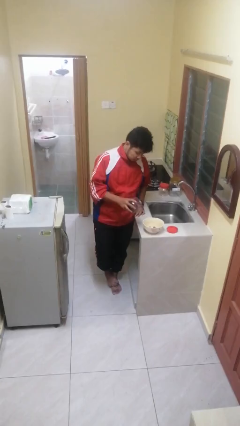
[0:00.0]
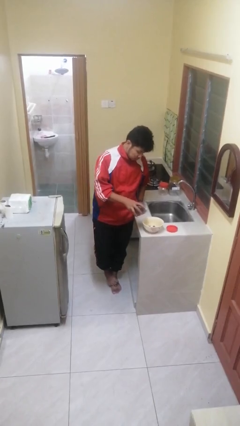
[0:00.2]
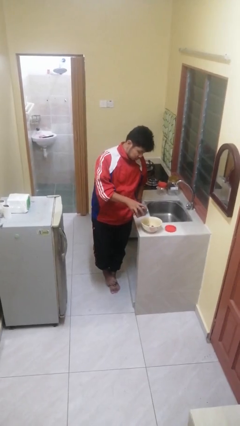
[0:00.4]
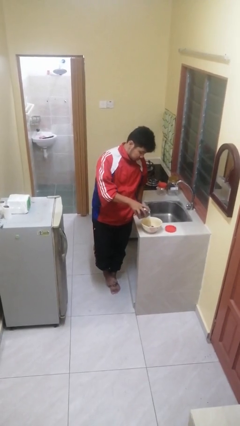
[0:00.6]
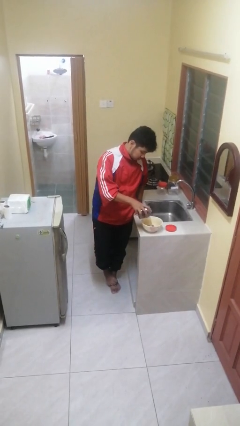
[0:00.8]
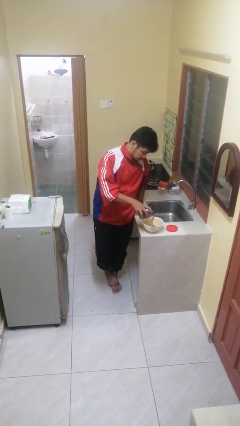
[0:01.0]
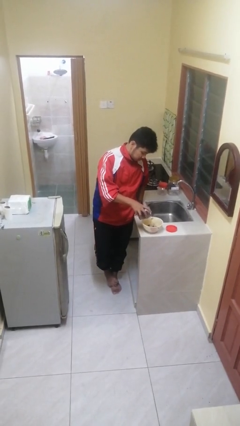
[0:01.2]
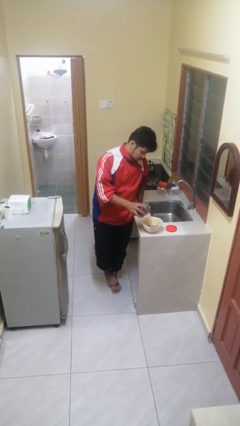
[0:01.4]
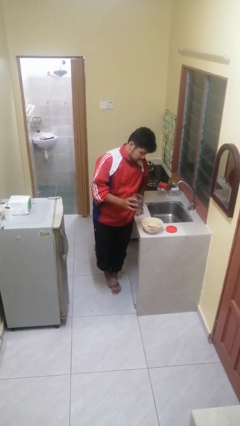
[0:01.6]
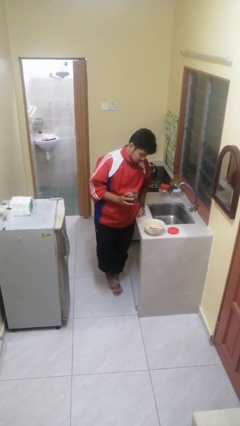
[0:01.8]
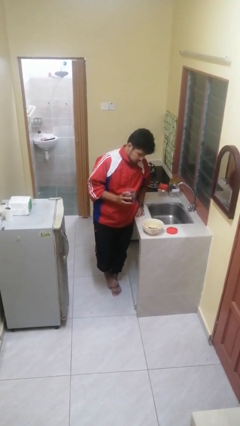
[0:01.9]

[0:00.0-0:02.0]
person pours into bowl

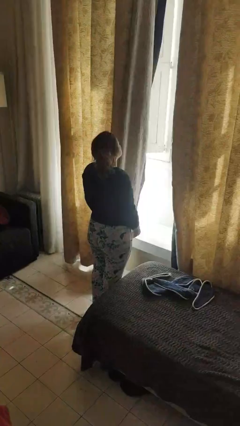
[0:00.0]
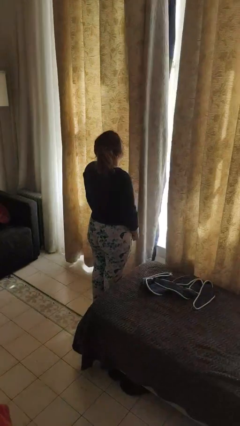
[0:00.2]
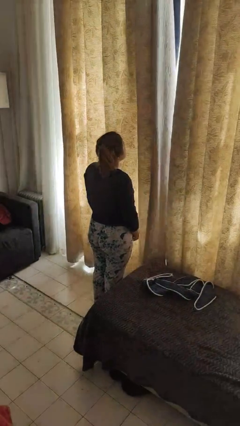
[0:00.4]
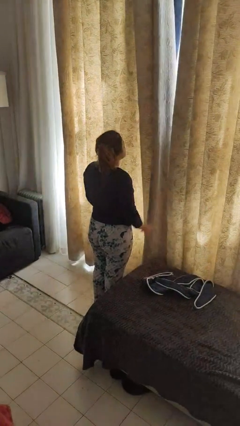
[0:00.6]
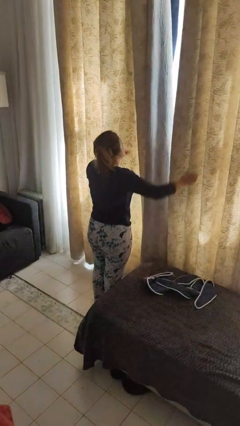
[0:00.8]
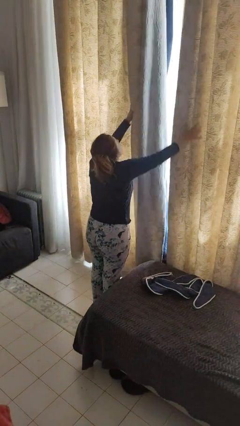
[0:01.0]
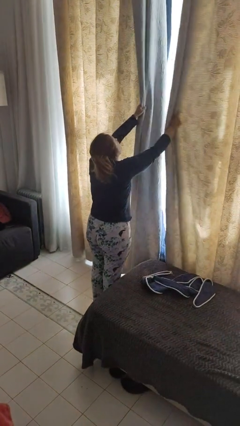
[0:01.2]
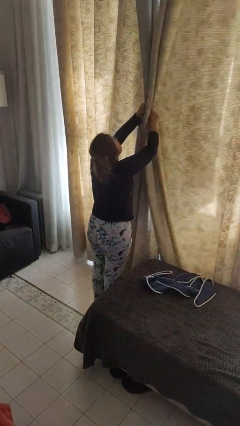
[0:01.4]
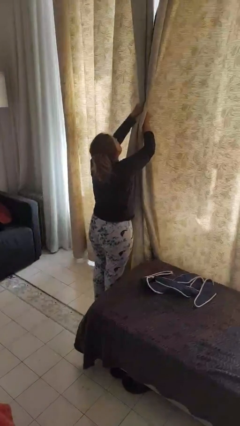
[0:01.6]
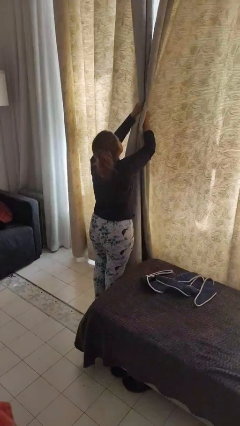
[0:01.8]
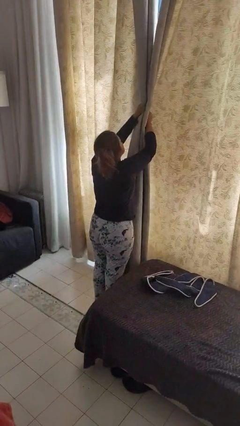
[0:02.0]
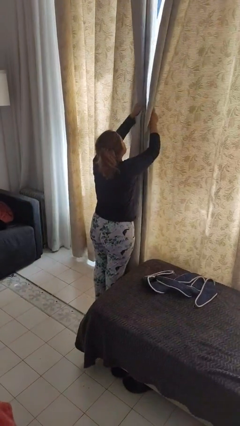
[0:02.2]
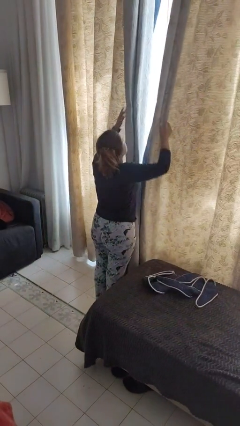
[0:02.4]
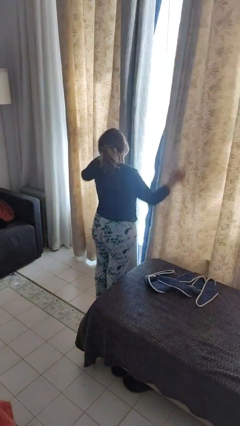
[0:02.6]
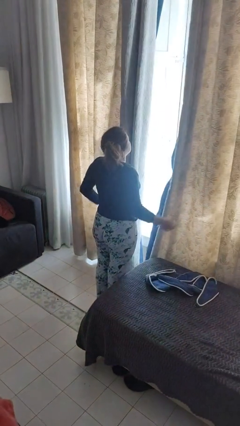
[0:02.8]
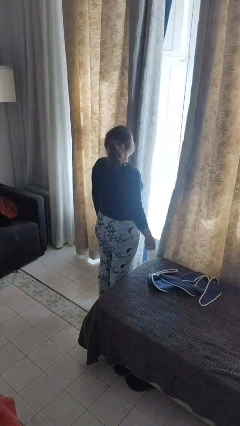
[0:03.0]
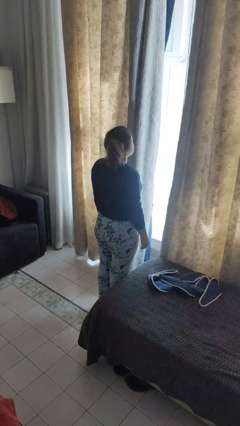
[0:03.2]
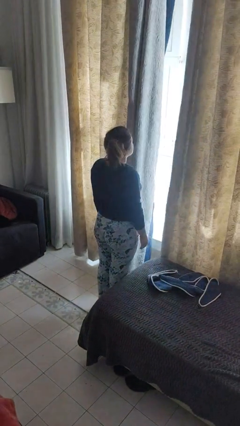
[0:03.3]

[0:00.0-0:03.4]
person closes curtains

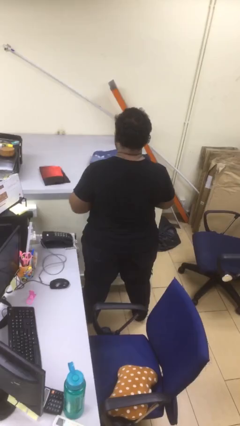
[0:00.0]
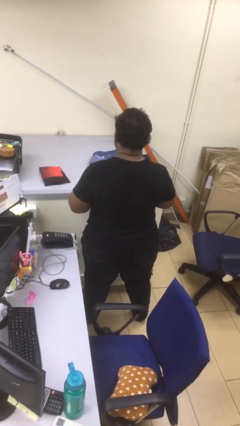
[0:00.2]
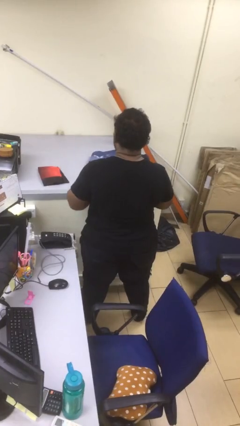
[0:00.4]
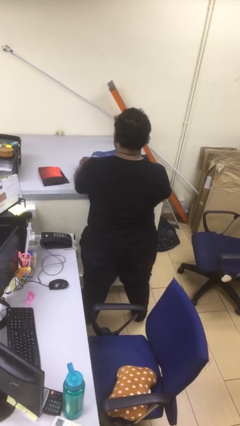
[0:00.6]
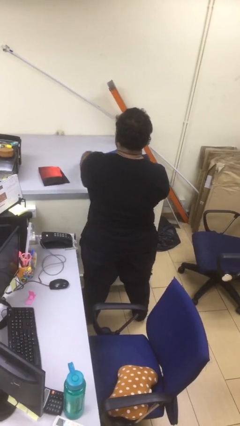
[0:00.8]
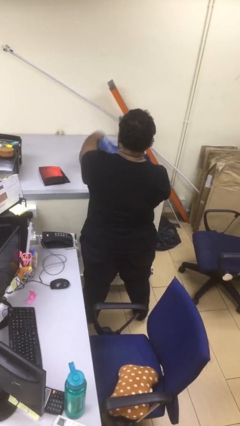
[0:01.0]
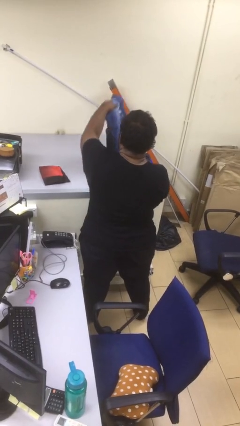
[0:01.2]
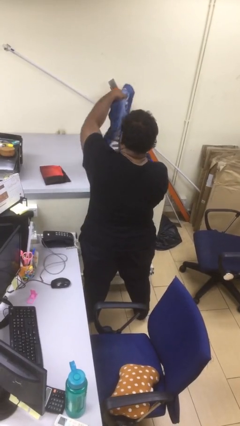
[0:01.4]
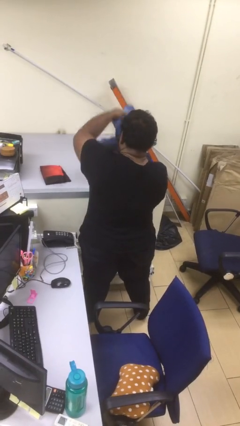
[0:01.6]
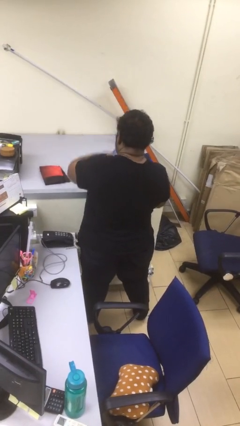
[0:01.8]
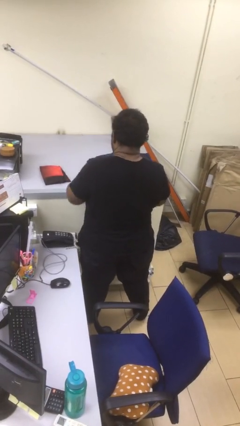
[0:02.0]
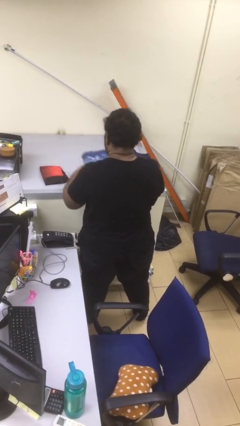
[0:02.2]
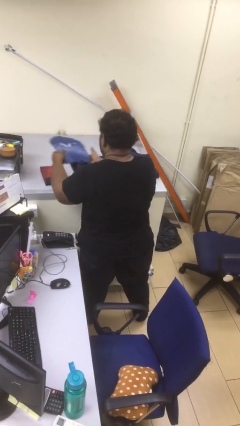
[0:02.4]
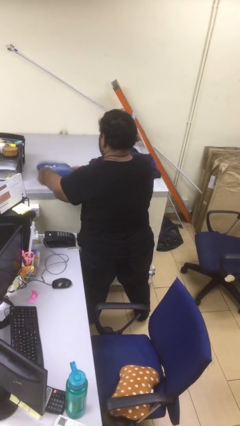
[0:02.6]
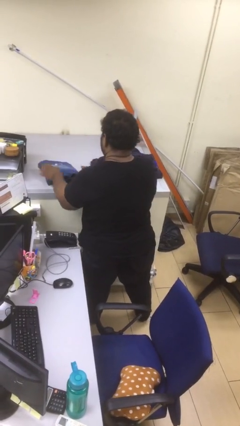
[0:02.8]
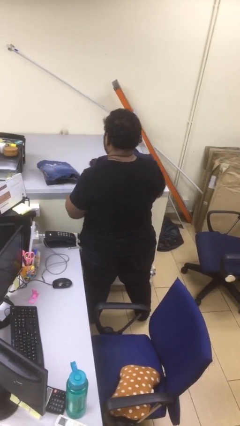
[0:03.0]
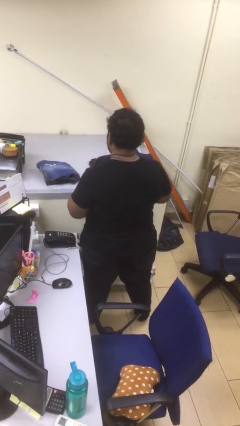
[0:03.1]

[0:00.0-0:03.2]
person folds pants

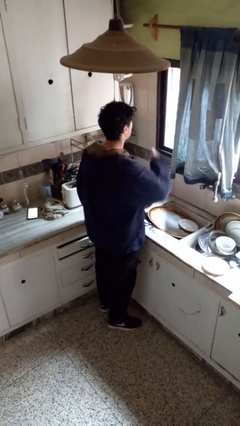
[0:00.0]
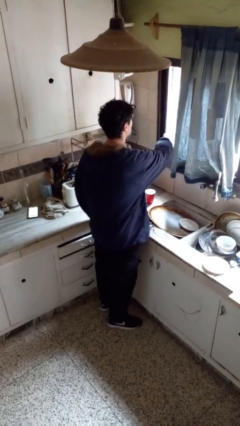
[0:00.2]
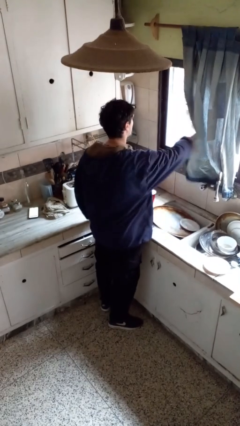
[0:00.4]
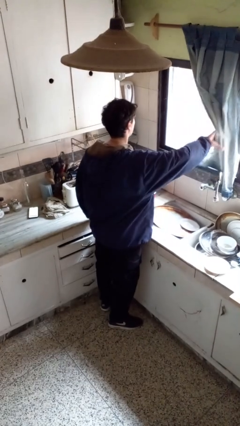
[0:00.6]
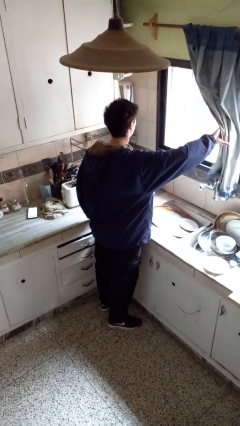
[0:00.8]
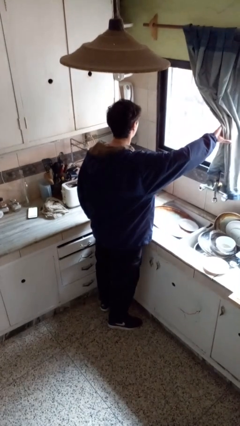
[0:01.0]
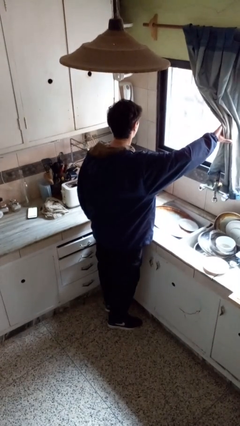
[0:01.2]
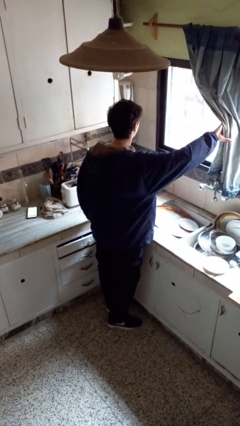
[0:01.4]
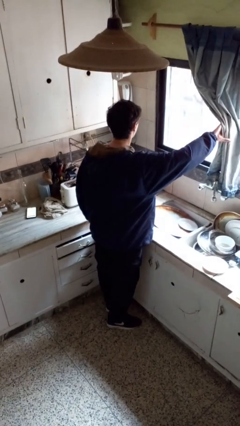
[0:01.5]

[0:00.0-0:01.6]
person opens curtains

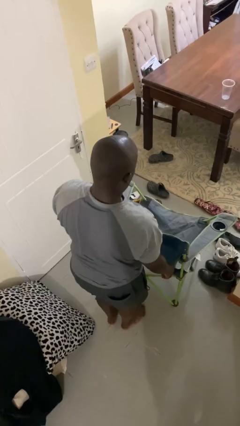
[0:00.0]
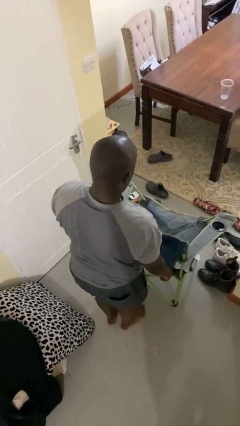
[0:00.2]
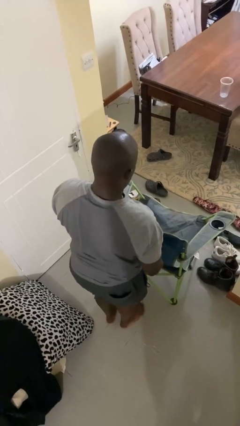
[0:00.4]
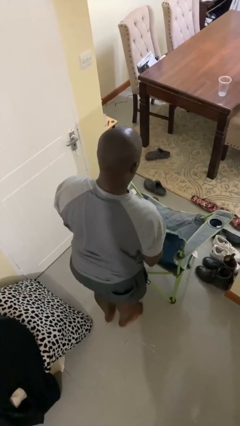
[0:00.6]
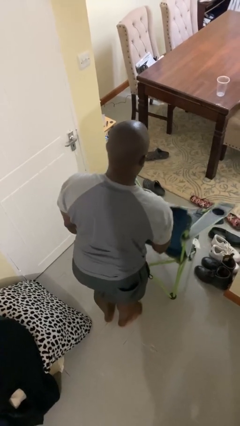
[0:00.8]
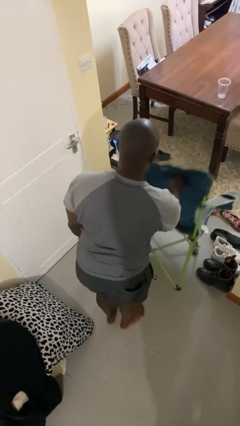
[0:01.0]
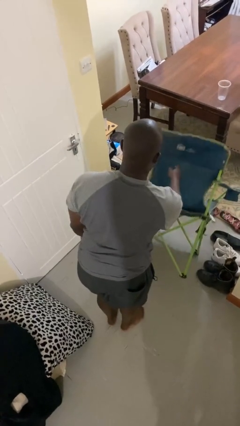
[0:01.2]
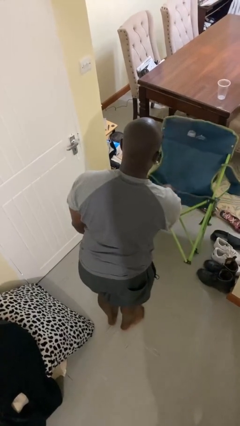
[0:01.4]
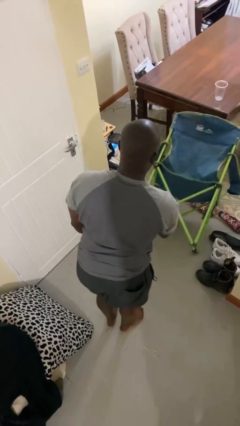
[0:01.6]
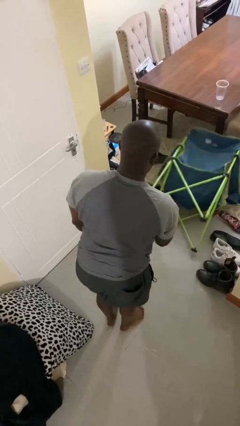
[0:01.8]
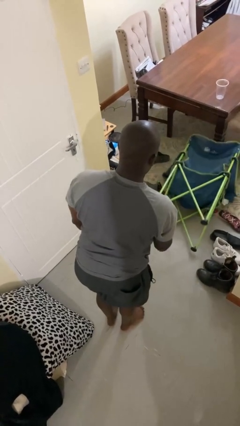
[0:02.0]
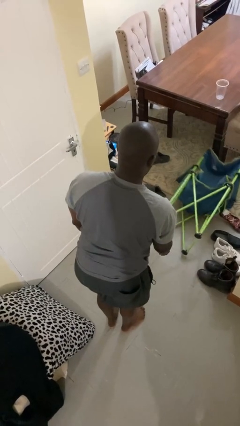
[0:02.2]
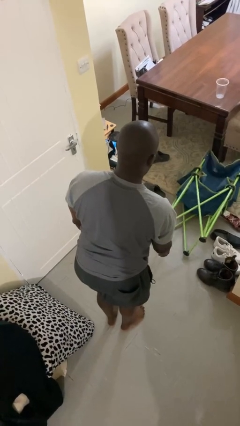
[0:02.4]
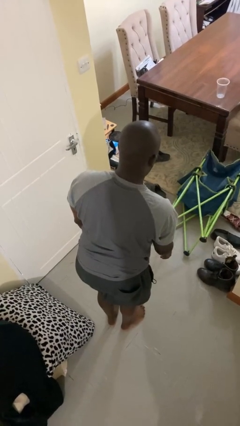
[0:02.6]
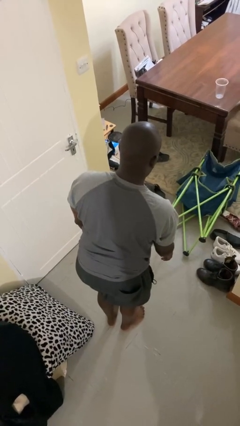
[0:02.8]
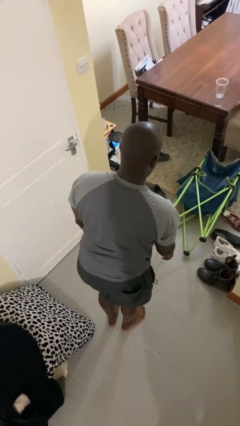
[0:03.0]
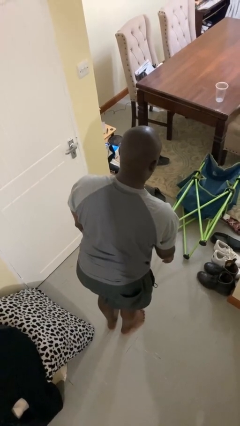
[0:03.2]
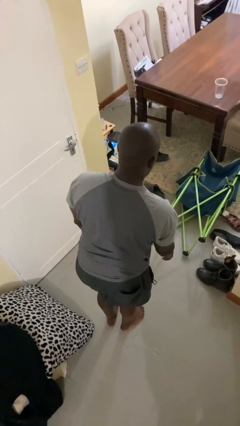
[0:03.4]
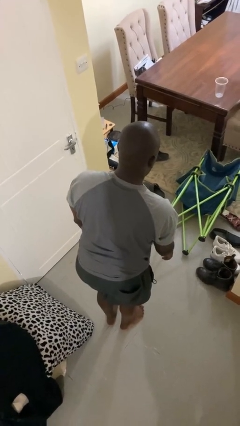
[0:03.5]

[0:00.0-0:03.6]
person knocks over furniture

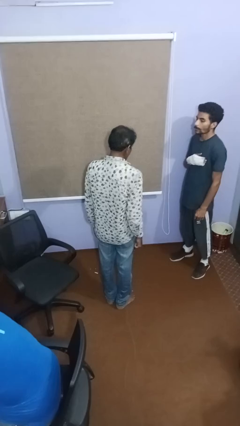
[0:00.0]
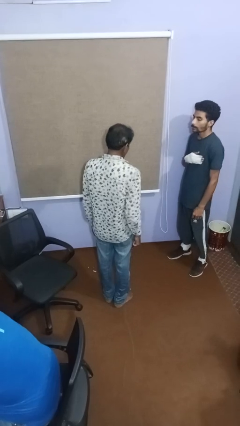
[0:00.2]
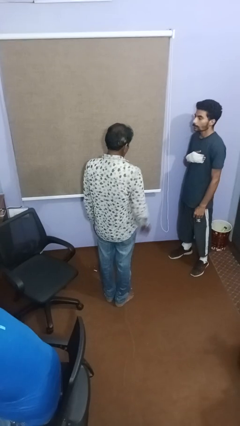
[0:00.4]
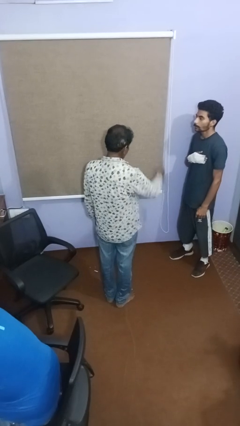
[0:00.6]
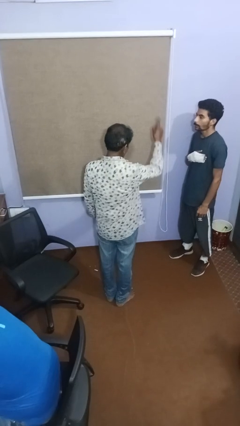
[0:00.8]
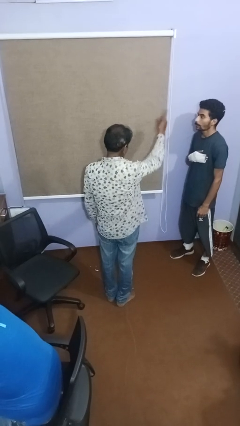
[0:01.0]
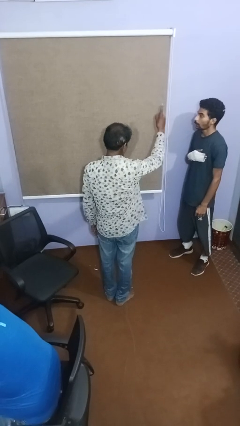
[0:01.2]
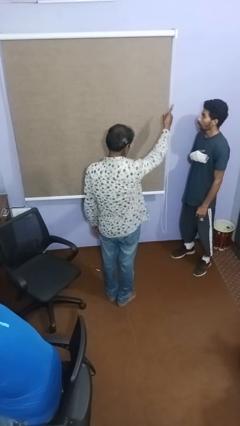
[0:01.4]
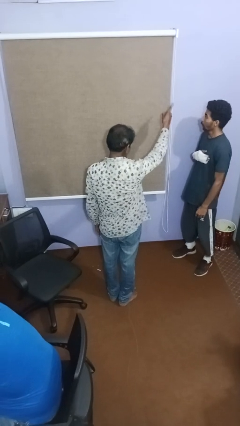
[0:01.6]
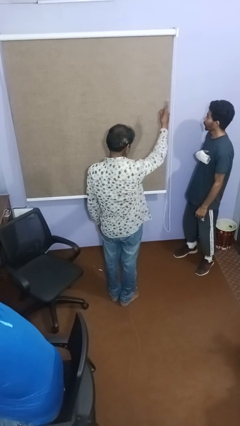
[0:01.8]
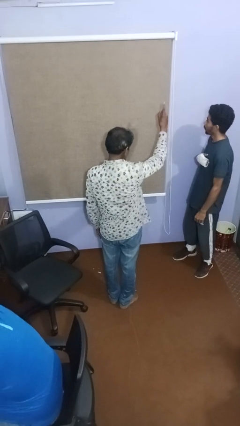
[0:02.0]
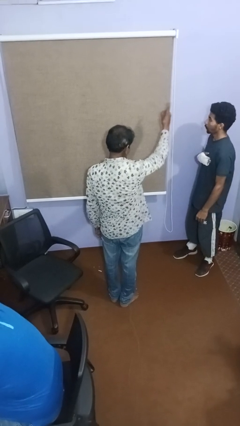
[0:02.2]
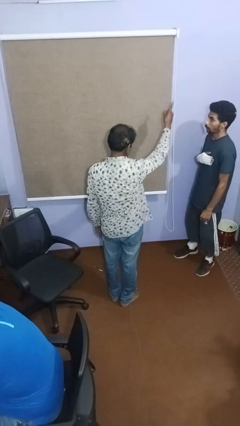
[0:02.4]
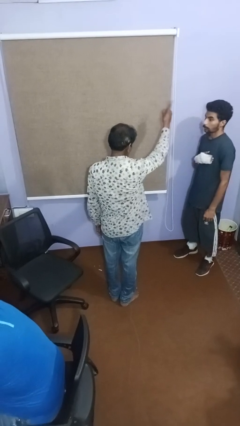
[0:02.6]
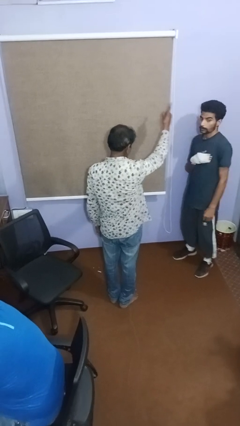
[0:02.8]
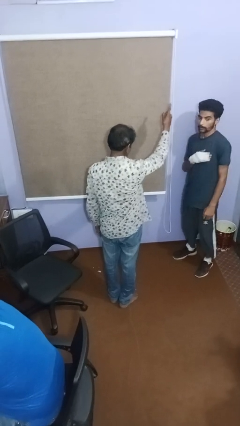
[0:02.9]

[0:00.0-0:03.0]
person points at person

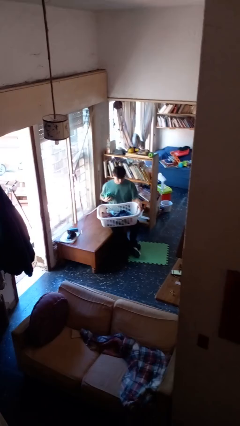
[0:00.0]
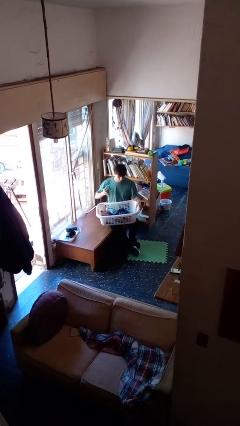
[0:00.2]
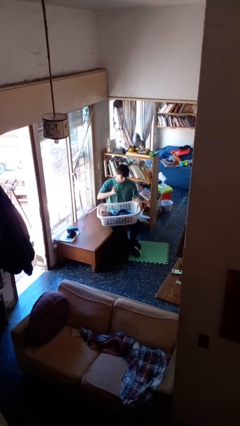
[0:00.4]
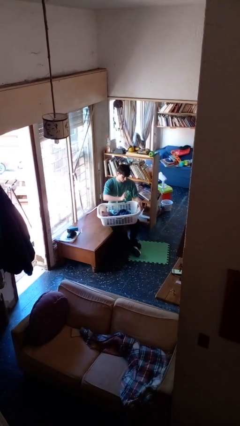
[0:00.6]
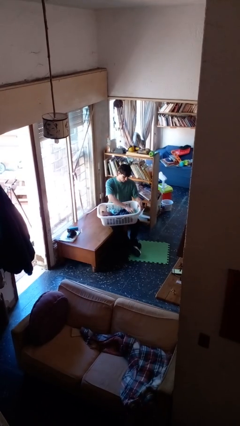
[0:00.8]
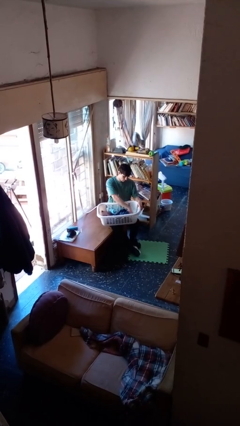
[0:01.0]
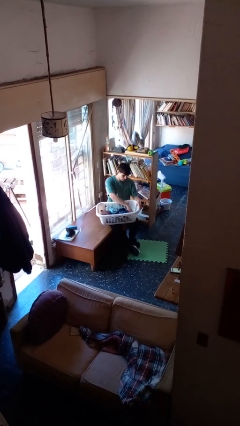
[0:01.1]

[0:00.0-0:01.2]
person puts object into basket
